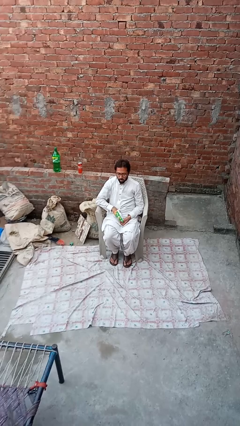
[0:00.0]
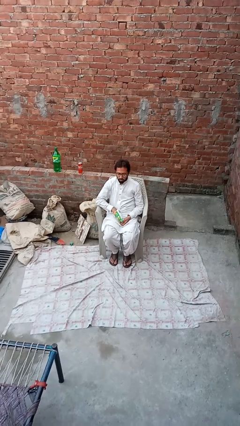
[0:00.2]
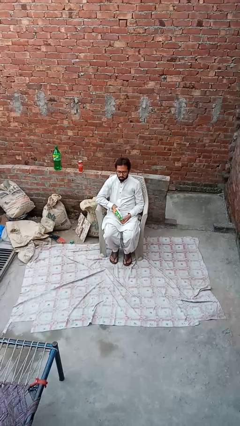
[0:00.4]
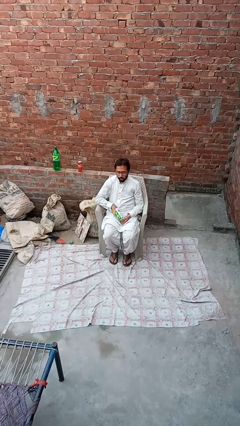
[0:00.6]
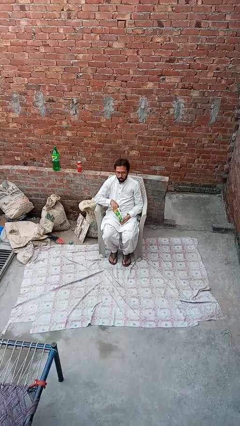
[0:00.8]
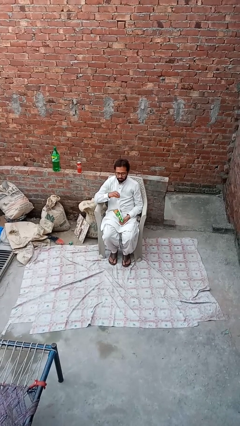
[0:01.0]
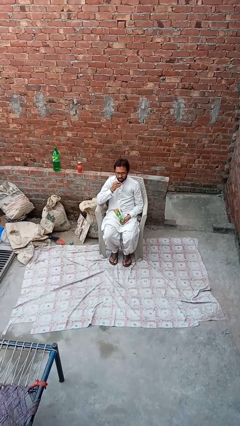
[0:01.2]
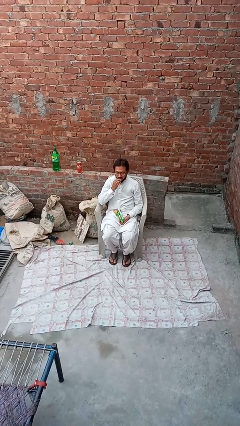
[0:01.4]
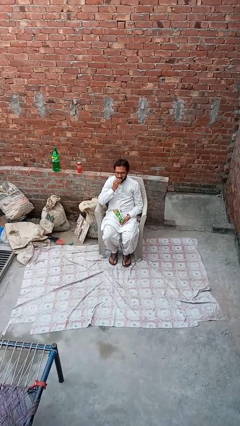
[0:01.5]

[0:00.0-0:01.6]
person eats snack from bag

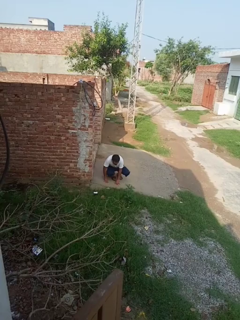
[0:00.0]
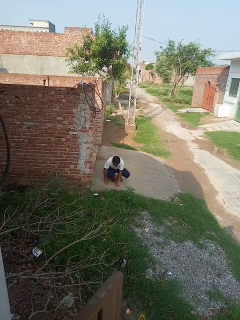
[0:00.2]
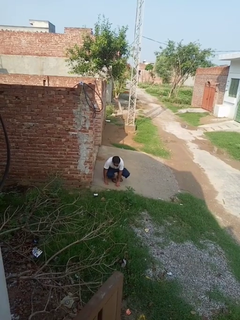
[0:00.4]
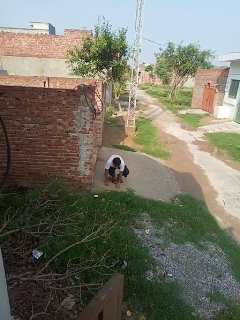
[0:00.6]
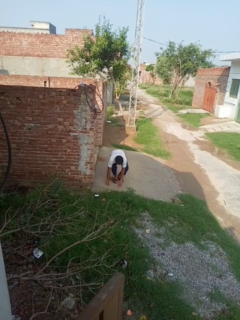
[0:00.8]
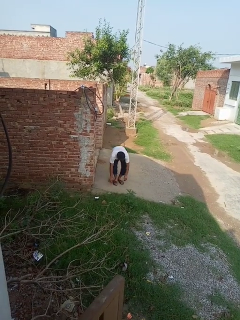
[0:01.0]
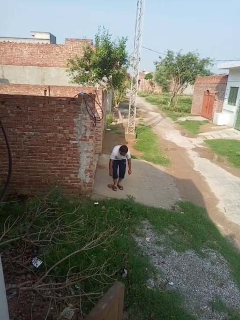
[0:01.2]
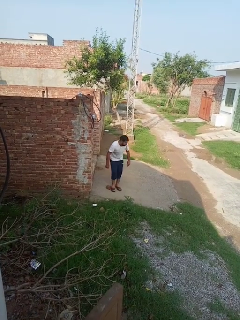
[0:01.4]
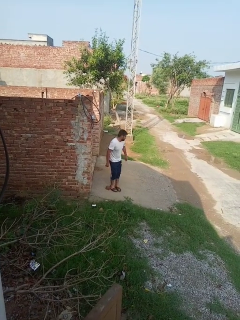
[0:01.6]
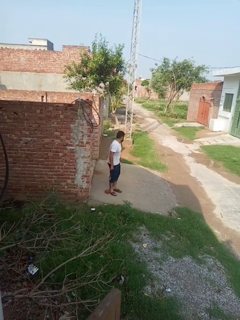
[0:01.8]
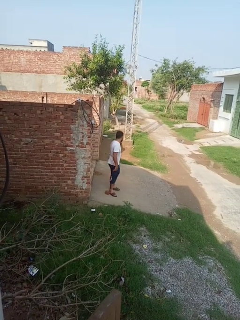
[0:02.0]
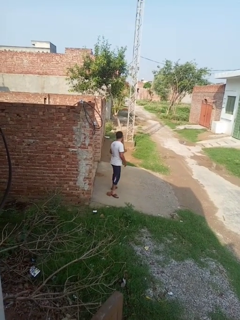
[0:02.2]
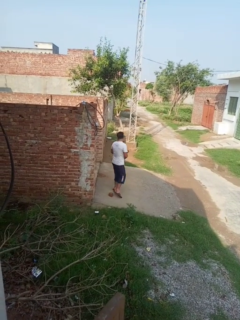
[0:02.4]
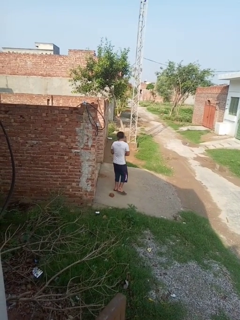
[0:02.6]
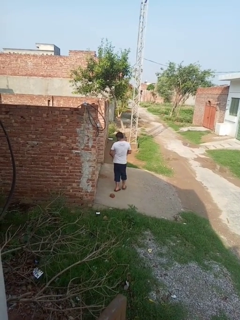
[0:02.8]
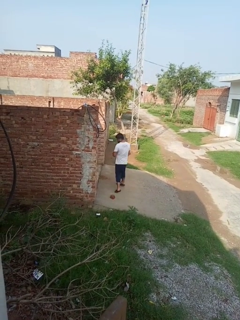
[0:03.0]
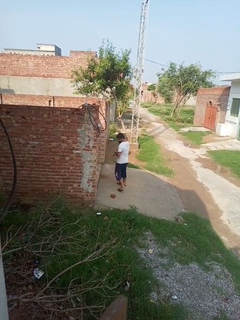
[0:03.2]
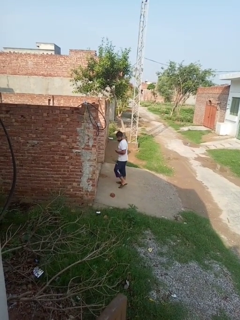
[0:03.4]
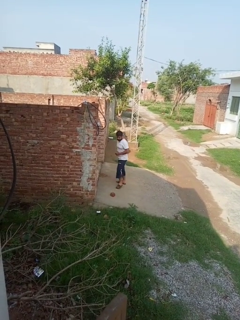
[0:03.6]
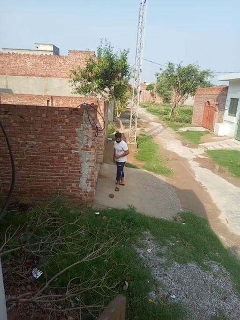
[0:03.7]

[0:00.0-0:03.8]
person stands up from floor

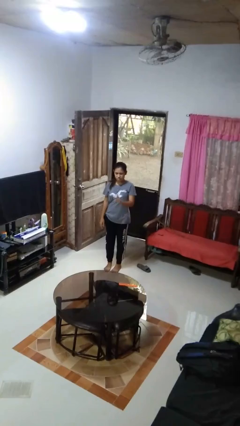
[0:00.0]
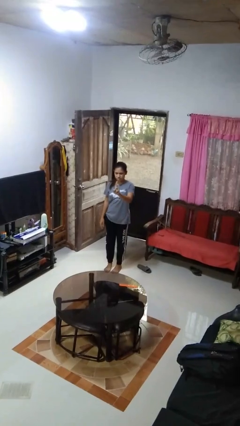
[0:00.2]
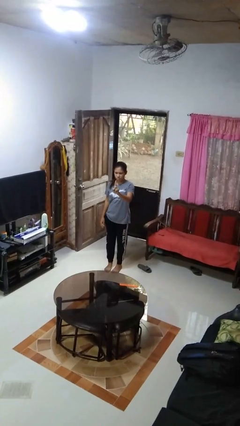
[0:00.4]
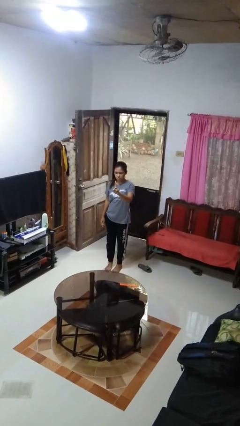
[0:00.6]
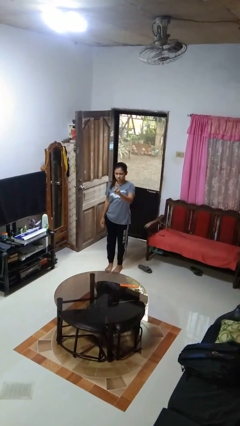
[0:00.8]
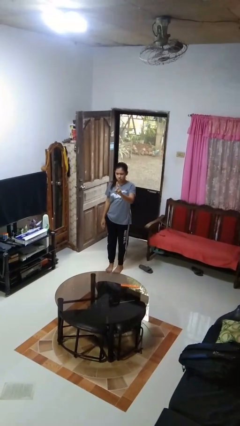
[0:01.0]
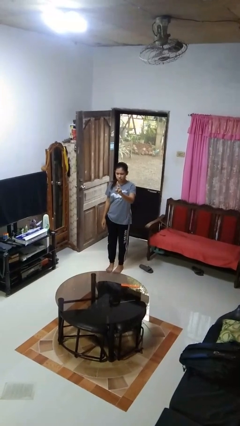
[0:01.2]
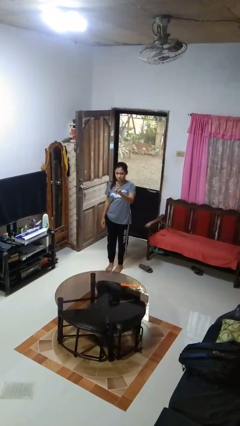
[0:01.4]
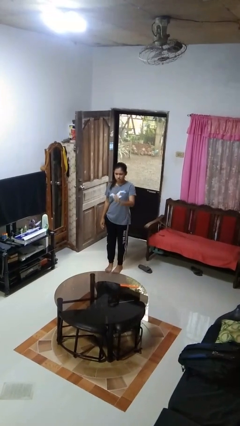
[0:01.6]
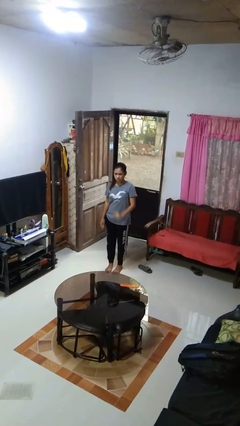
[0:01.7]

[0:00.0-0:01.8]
person gestures number one

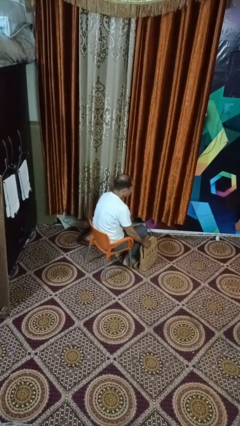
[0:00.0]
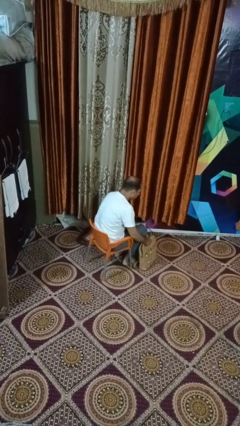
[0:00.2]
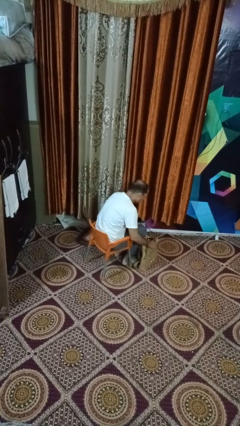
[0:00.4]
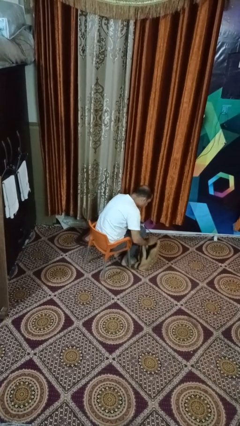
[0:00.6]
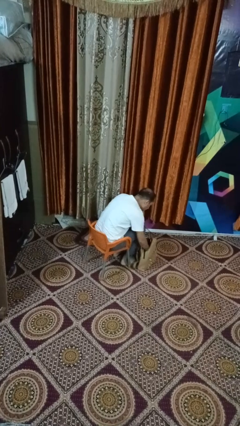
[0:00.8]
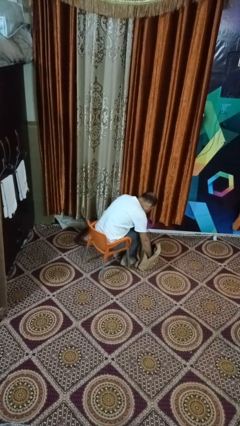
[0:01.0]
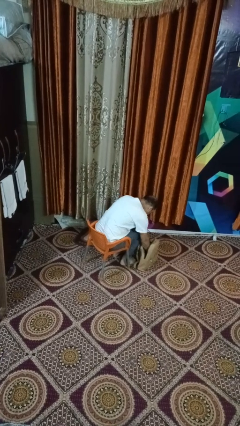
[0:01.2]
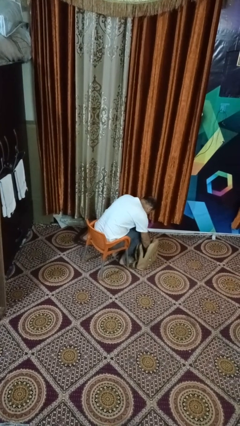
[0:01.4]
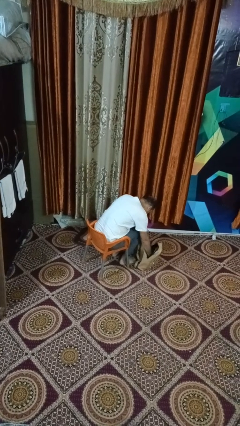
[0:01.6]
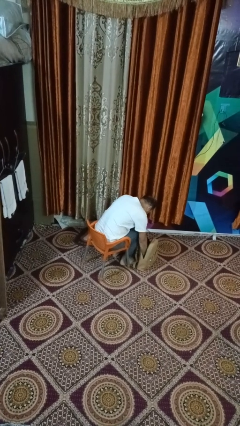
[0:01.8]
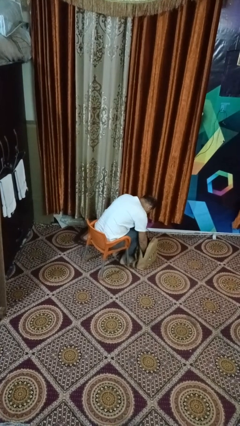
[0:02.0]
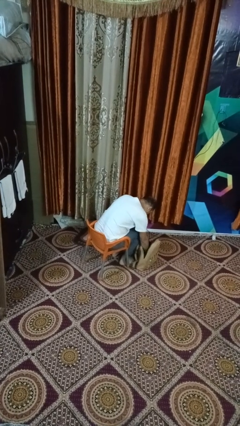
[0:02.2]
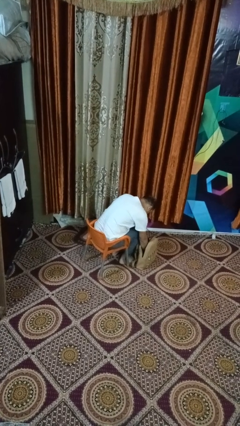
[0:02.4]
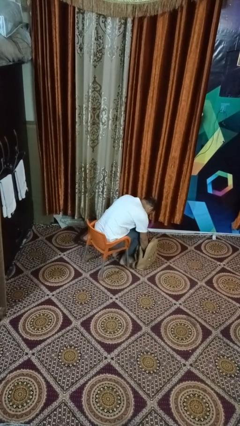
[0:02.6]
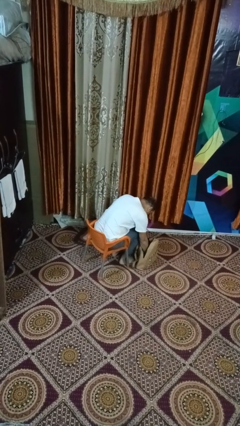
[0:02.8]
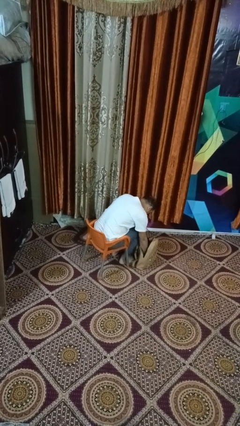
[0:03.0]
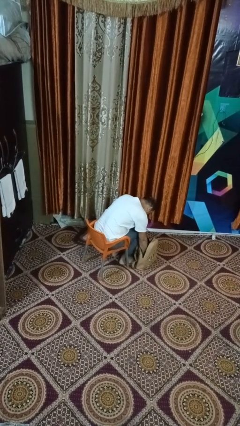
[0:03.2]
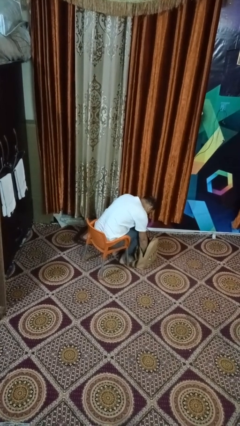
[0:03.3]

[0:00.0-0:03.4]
person searches in purse

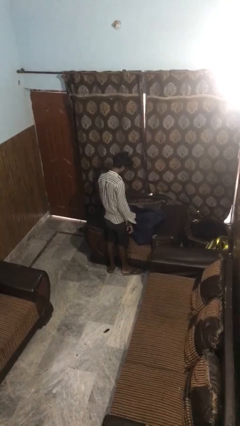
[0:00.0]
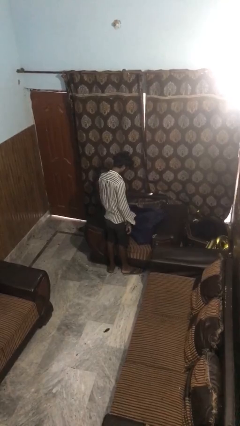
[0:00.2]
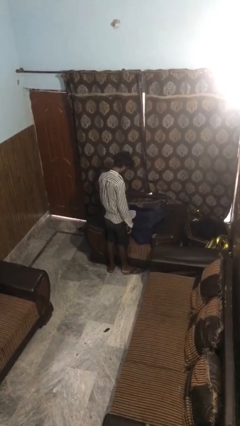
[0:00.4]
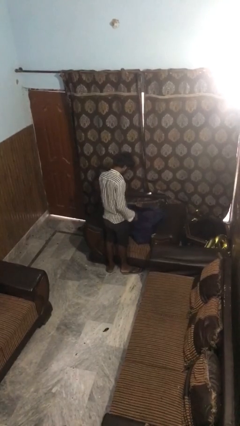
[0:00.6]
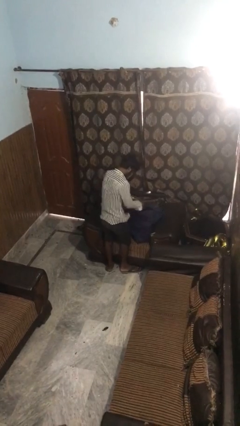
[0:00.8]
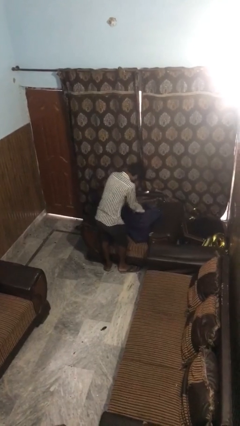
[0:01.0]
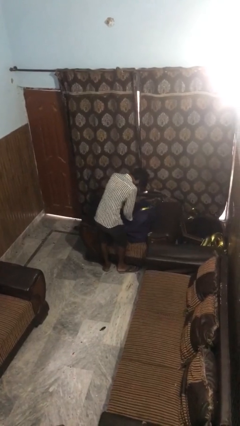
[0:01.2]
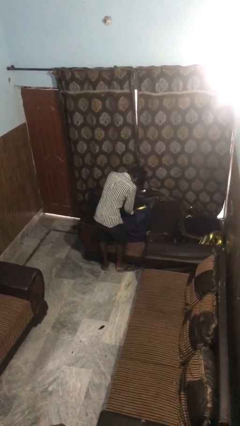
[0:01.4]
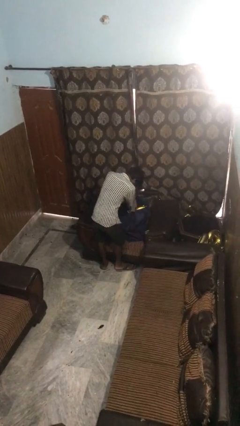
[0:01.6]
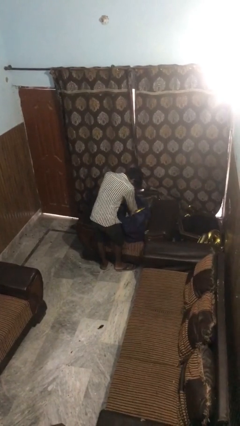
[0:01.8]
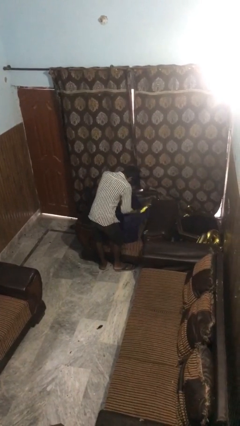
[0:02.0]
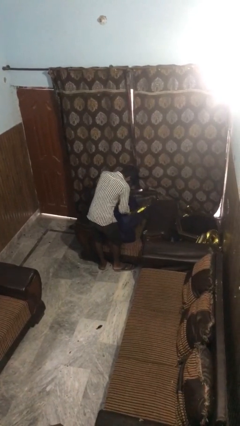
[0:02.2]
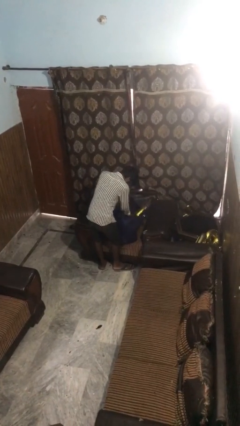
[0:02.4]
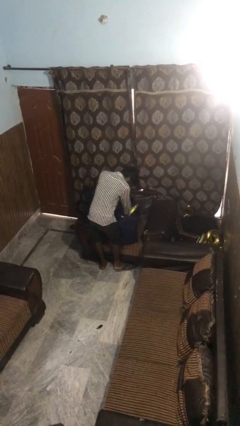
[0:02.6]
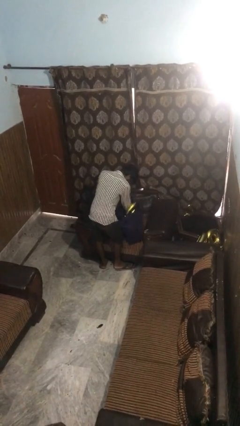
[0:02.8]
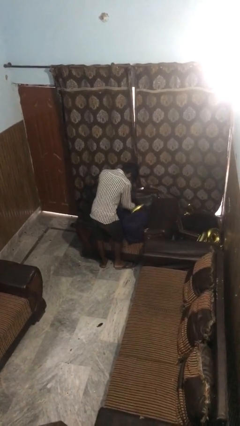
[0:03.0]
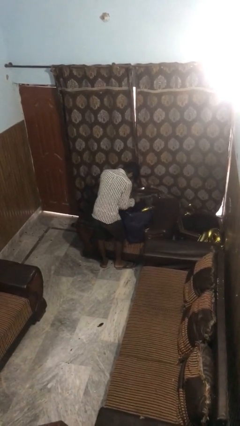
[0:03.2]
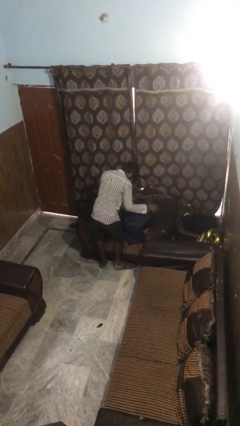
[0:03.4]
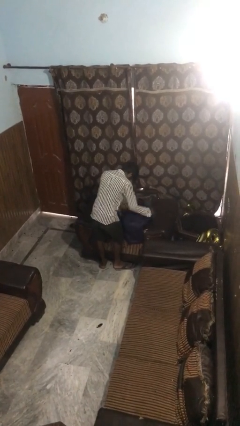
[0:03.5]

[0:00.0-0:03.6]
person searches in bag

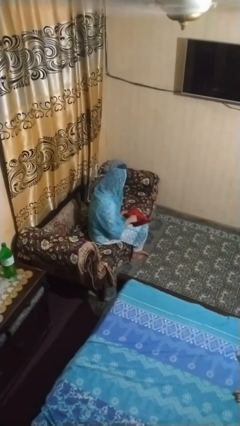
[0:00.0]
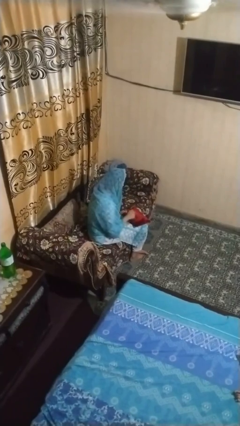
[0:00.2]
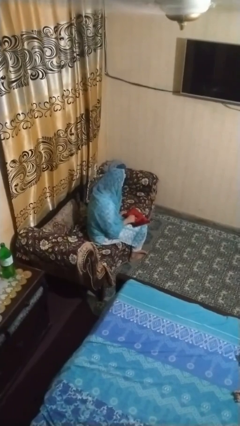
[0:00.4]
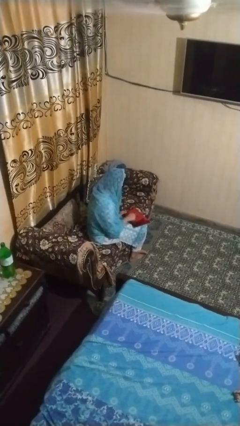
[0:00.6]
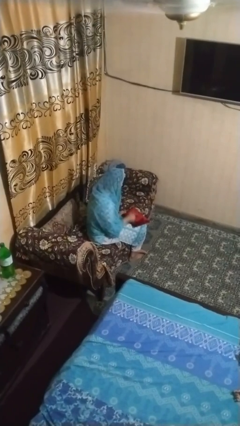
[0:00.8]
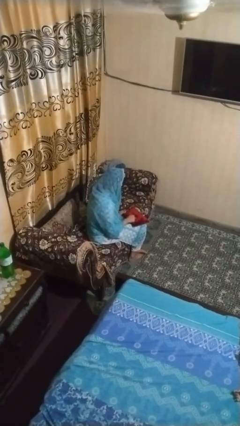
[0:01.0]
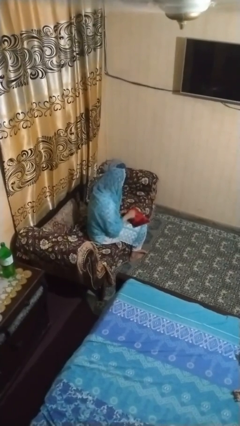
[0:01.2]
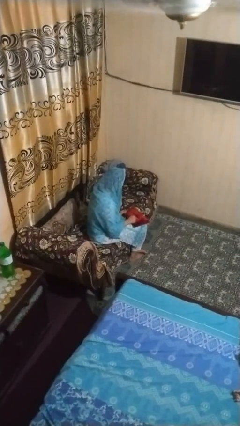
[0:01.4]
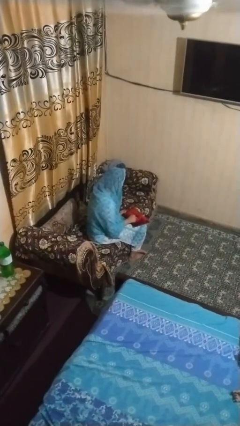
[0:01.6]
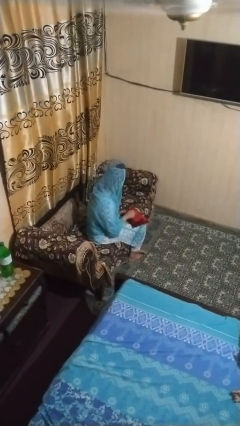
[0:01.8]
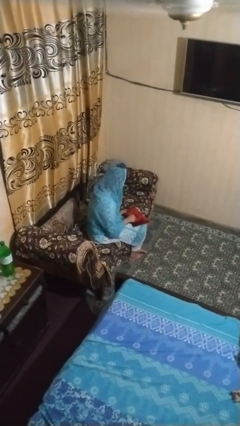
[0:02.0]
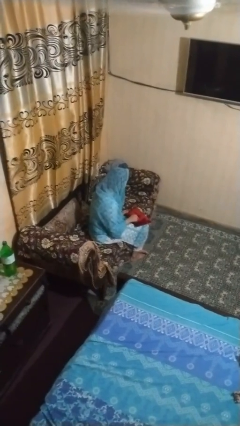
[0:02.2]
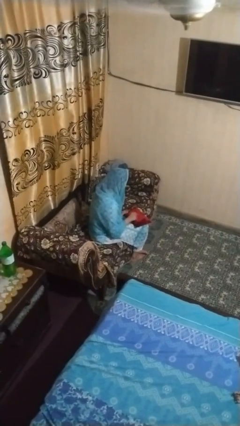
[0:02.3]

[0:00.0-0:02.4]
person taps object with finger

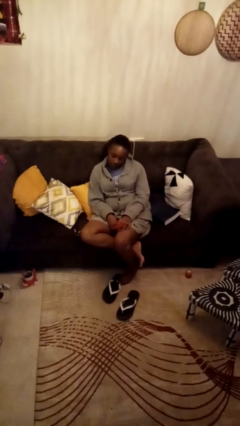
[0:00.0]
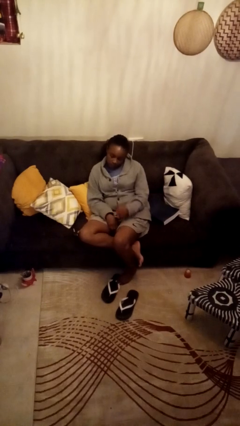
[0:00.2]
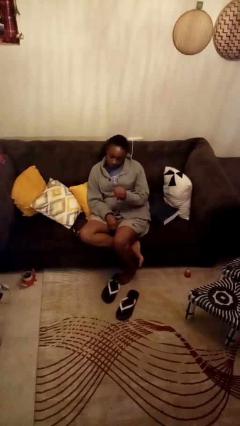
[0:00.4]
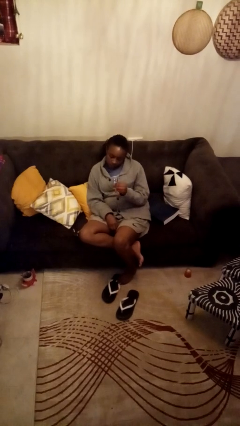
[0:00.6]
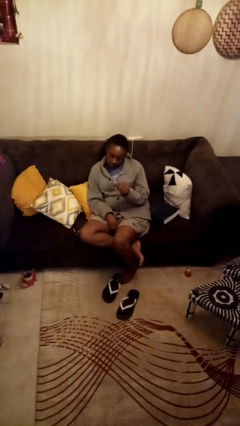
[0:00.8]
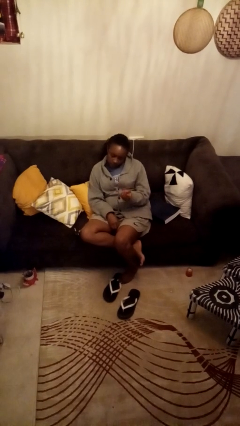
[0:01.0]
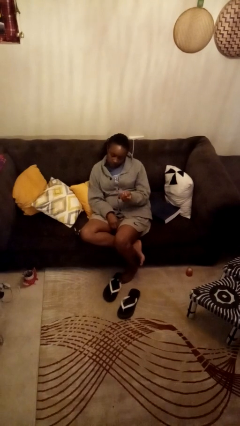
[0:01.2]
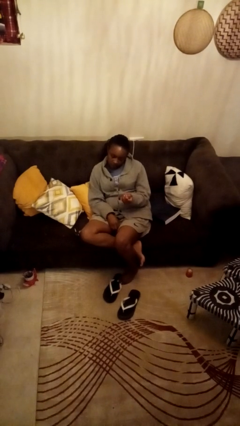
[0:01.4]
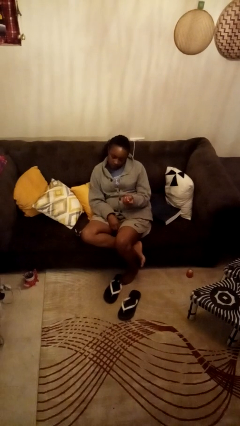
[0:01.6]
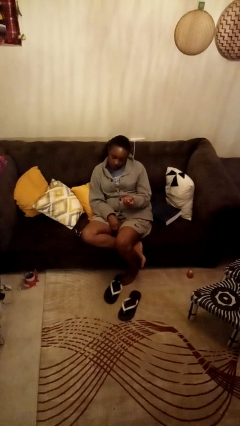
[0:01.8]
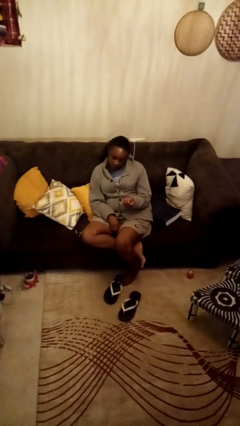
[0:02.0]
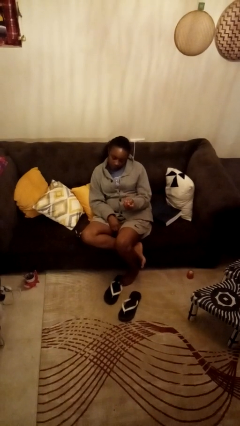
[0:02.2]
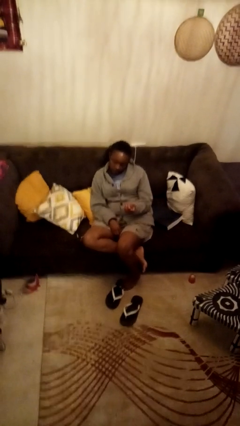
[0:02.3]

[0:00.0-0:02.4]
person squeezes object
